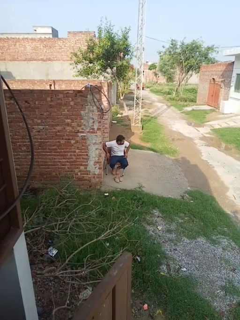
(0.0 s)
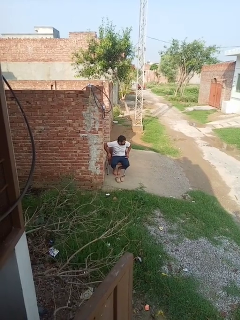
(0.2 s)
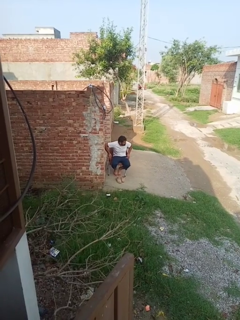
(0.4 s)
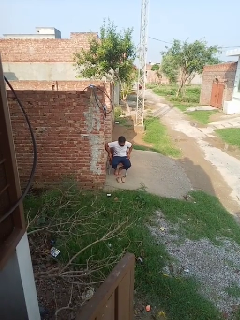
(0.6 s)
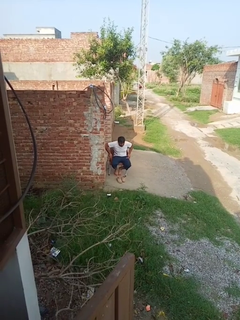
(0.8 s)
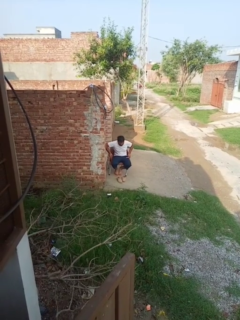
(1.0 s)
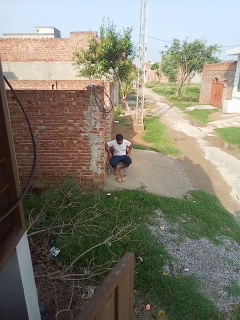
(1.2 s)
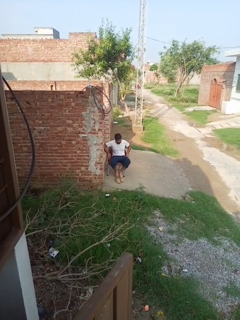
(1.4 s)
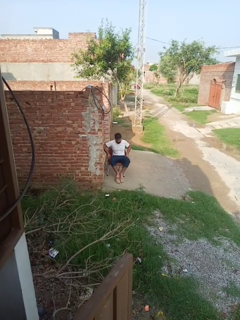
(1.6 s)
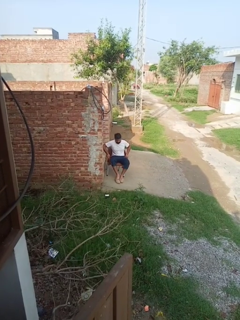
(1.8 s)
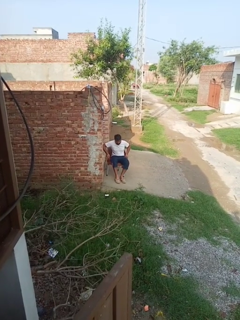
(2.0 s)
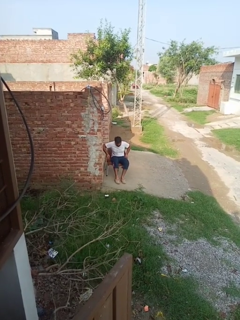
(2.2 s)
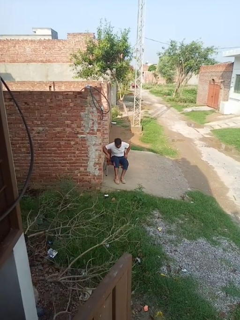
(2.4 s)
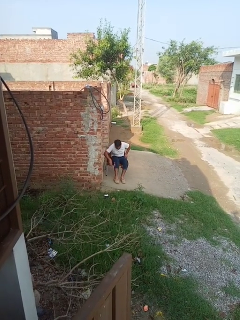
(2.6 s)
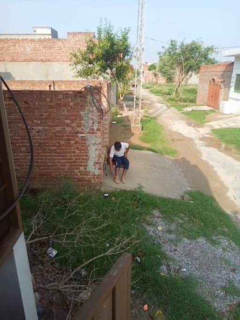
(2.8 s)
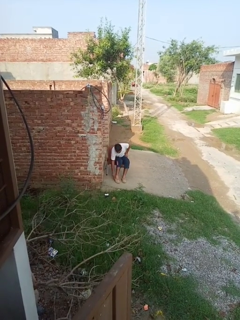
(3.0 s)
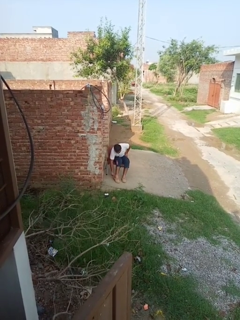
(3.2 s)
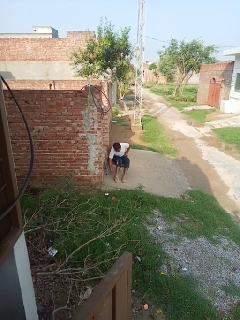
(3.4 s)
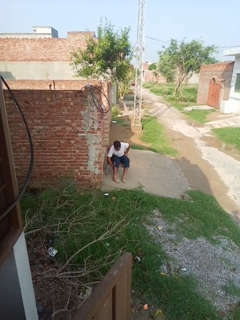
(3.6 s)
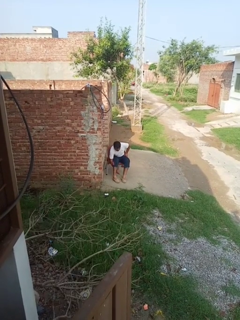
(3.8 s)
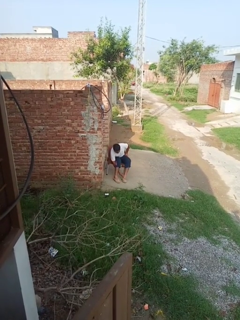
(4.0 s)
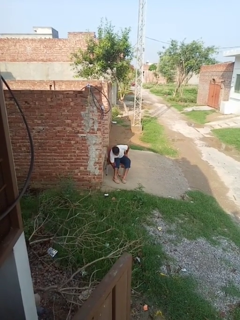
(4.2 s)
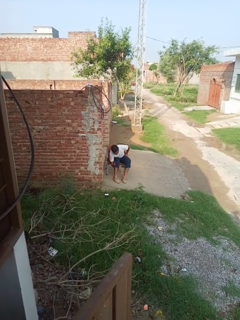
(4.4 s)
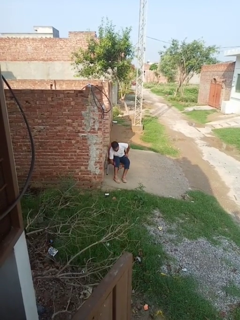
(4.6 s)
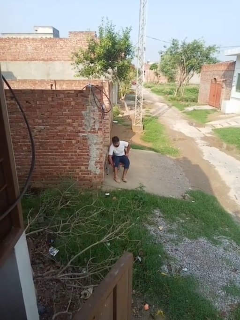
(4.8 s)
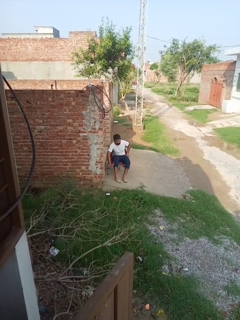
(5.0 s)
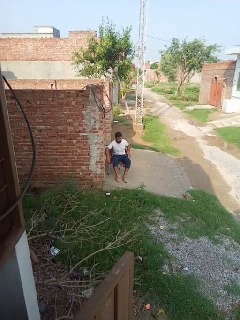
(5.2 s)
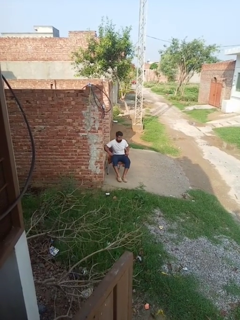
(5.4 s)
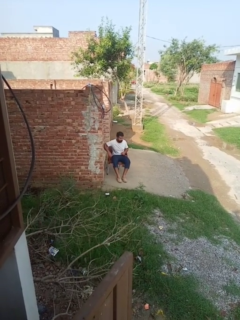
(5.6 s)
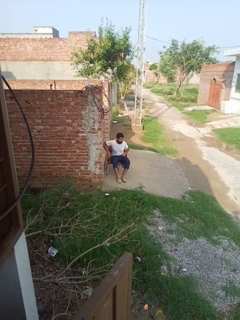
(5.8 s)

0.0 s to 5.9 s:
person puts on shoes

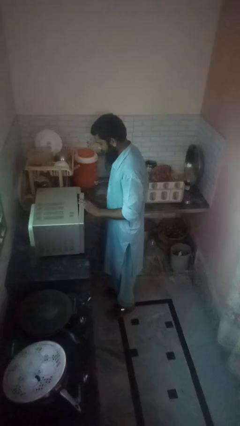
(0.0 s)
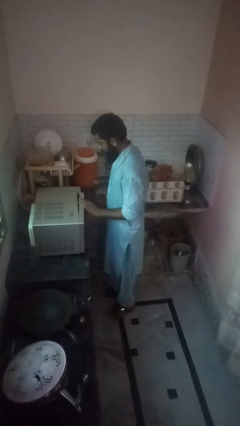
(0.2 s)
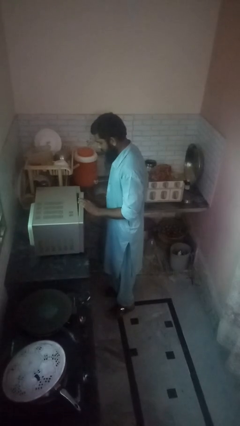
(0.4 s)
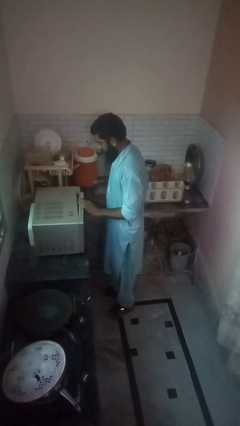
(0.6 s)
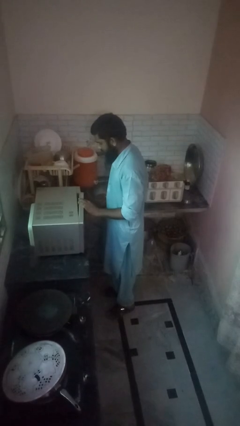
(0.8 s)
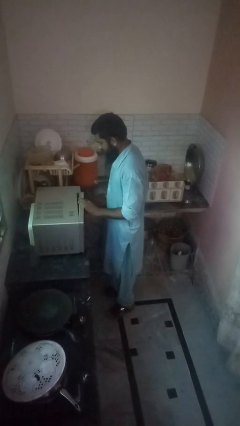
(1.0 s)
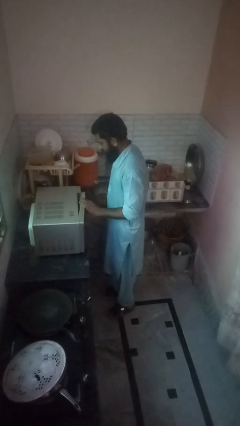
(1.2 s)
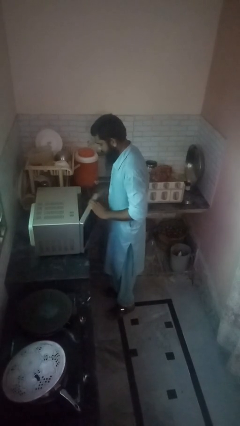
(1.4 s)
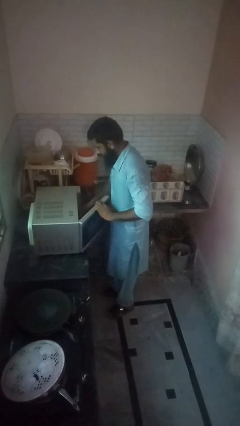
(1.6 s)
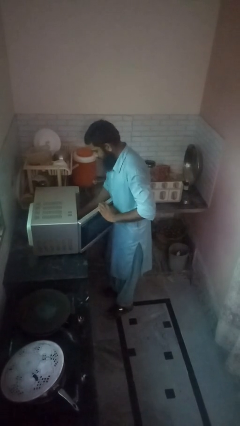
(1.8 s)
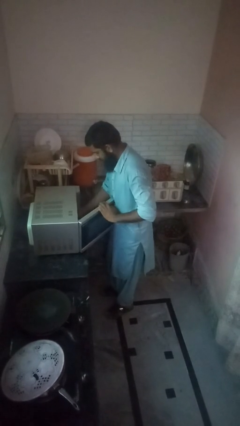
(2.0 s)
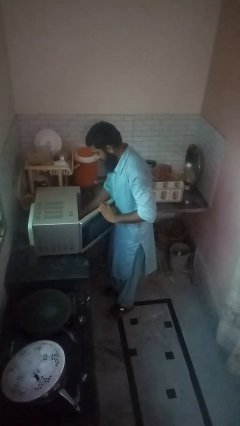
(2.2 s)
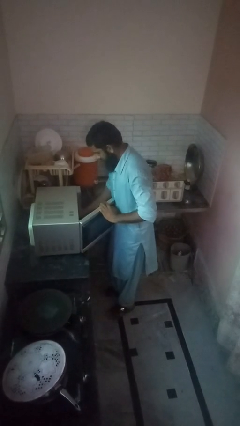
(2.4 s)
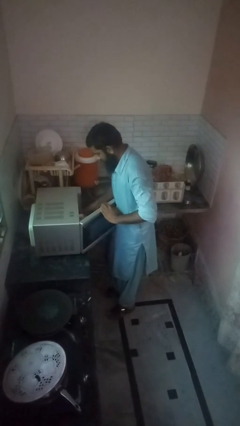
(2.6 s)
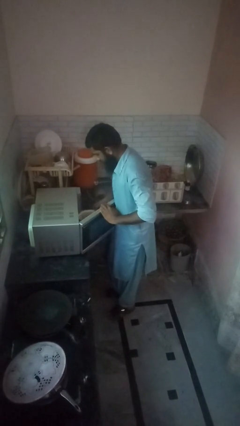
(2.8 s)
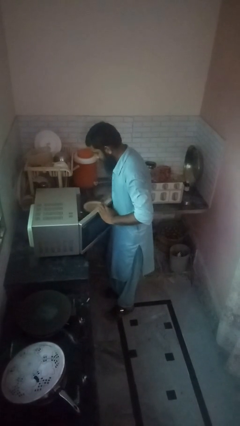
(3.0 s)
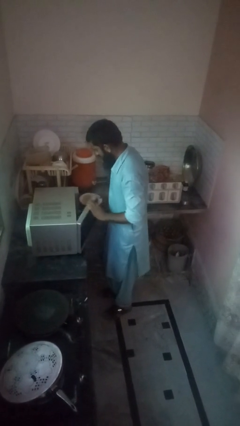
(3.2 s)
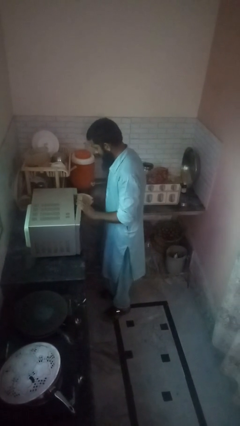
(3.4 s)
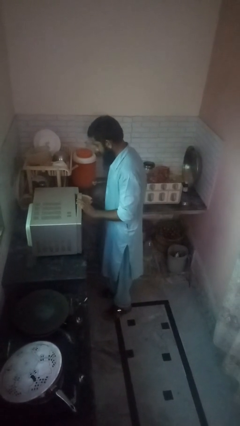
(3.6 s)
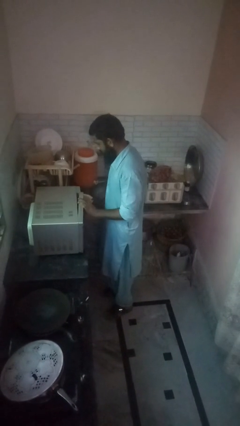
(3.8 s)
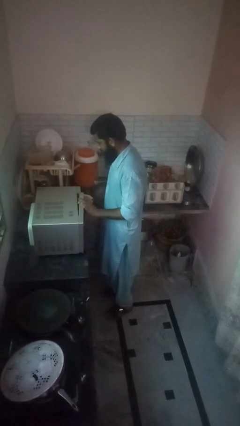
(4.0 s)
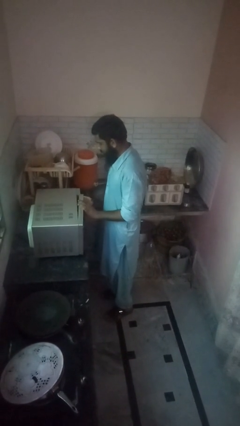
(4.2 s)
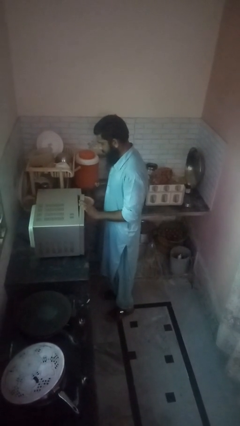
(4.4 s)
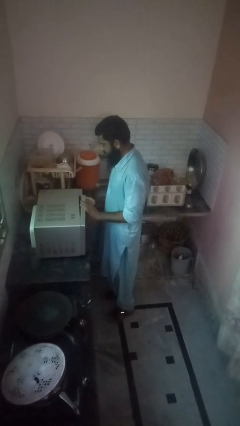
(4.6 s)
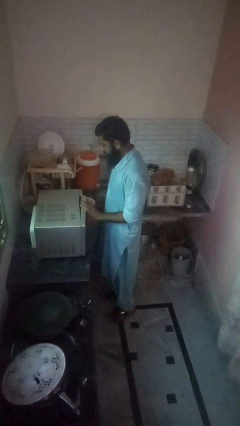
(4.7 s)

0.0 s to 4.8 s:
person takes object from oven

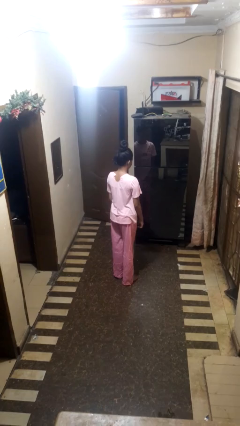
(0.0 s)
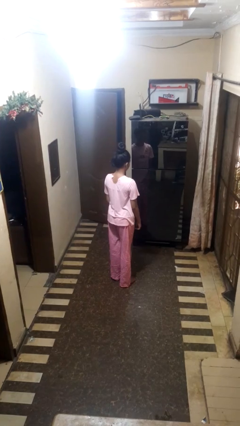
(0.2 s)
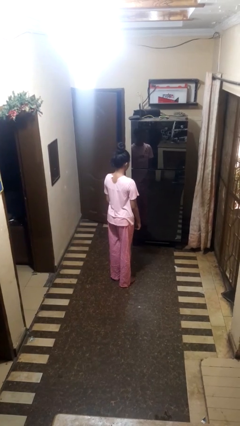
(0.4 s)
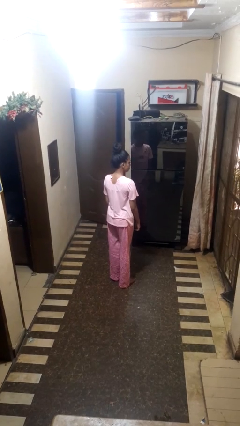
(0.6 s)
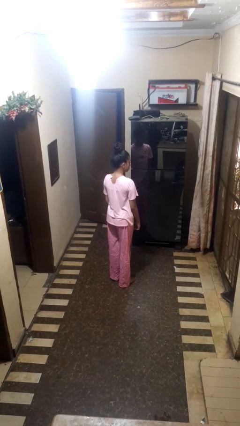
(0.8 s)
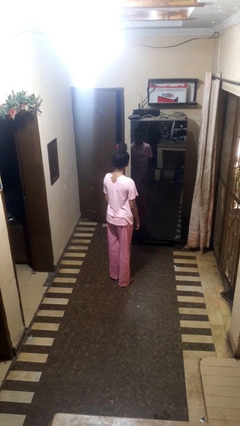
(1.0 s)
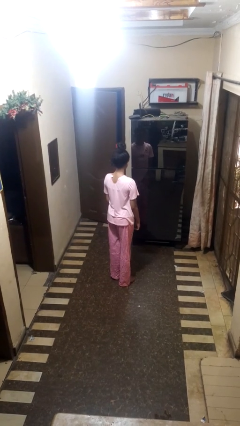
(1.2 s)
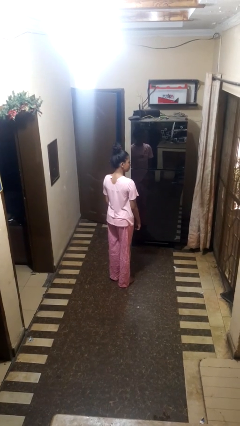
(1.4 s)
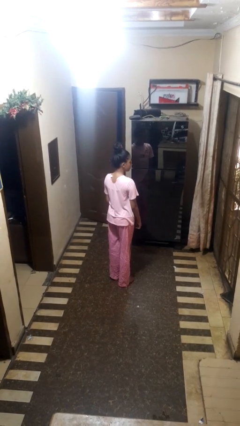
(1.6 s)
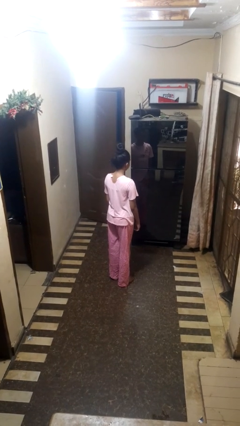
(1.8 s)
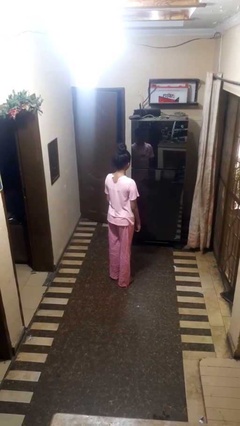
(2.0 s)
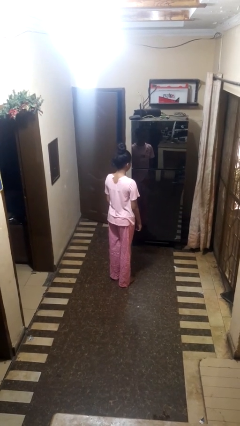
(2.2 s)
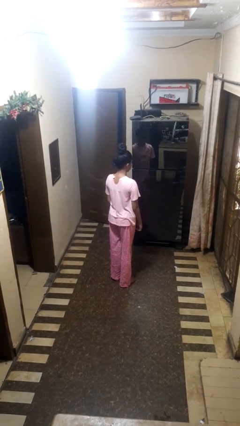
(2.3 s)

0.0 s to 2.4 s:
person nods head

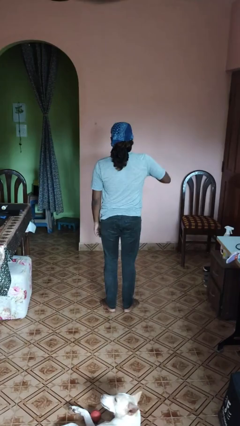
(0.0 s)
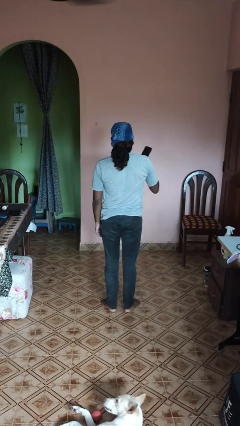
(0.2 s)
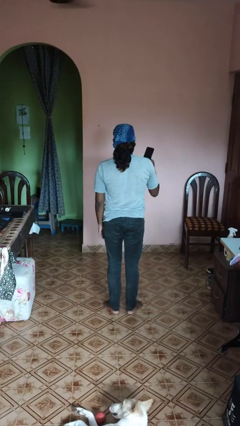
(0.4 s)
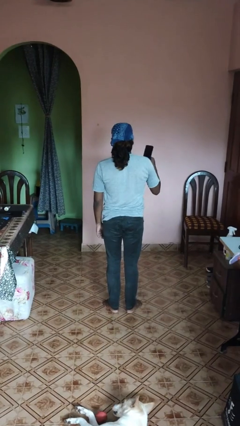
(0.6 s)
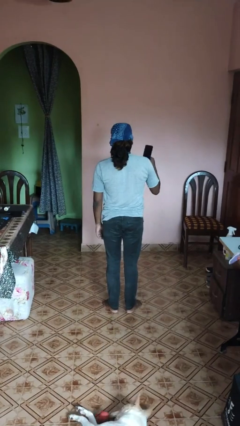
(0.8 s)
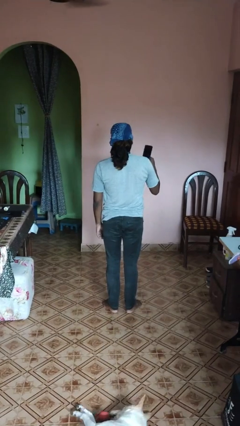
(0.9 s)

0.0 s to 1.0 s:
person takes phone from pocket

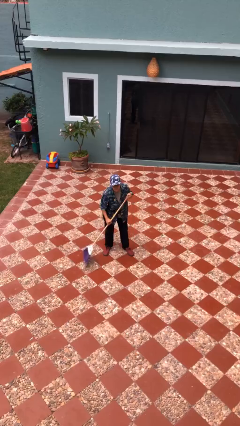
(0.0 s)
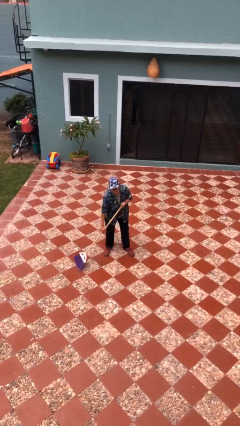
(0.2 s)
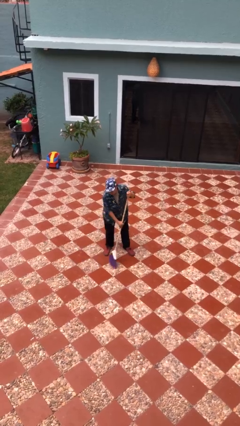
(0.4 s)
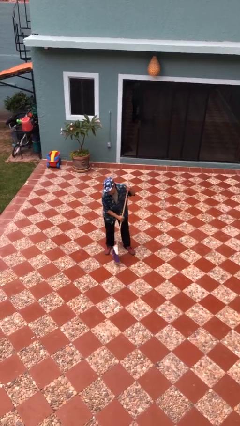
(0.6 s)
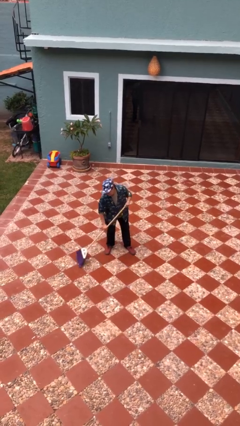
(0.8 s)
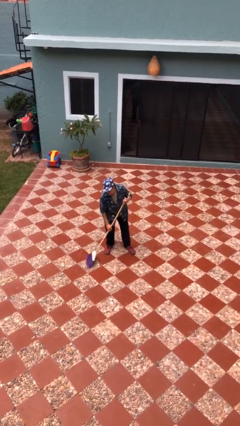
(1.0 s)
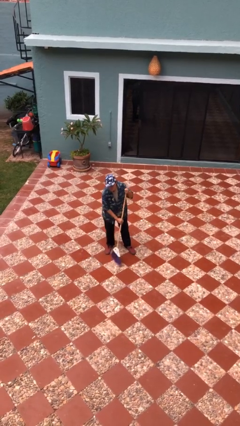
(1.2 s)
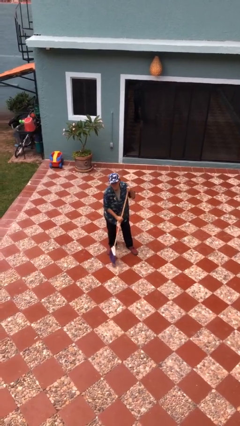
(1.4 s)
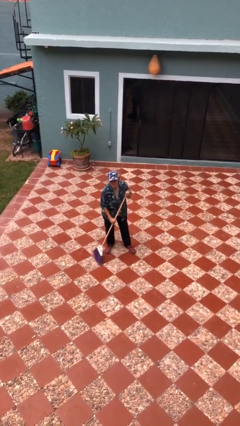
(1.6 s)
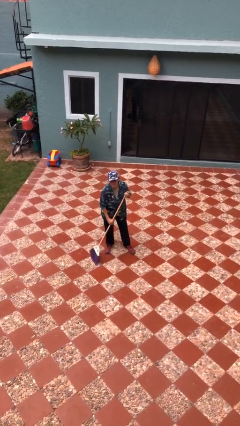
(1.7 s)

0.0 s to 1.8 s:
person sweeps floor

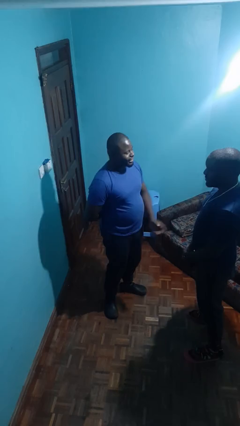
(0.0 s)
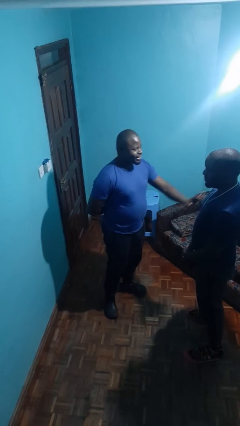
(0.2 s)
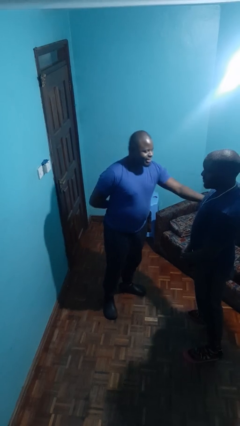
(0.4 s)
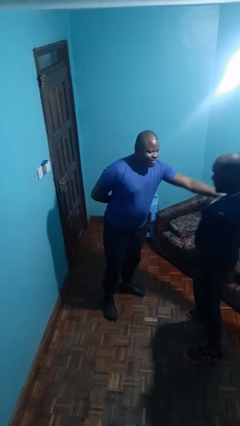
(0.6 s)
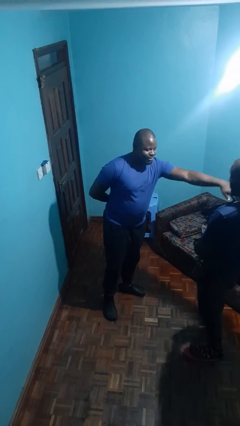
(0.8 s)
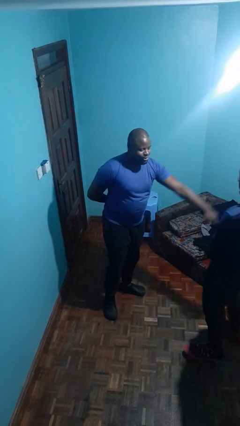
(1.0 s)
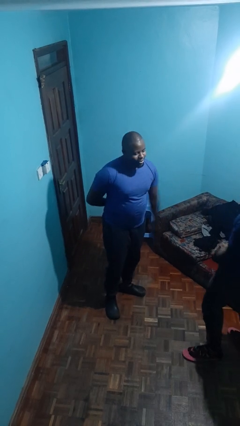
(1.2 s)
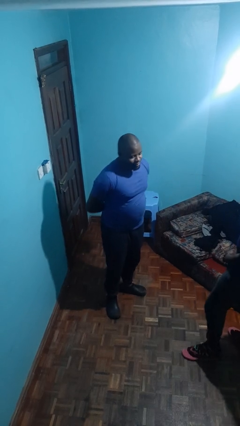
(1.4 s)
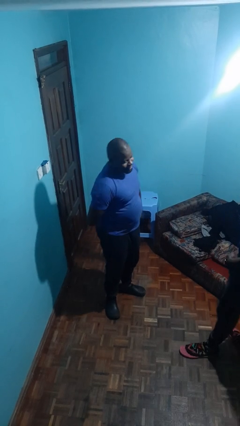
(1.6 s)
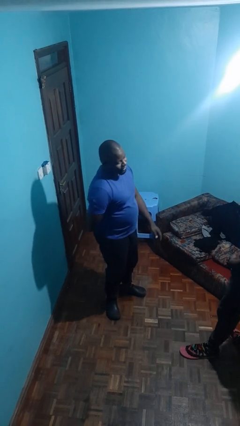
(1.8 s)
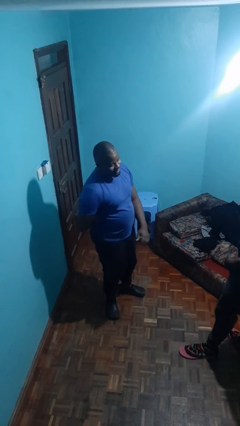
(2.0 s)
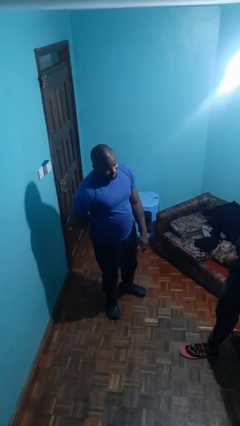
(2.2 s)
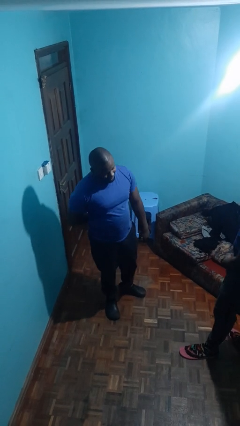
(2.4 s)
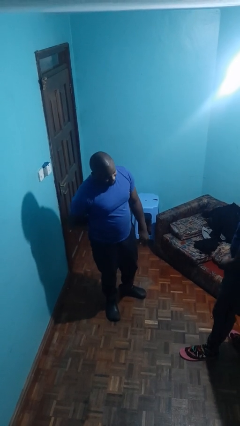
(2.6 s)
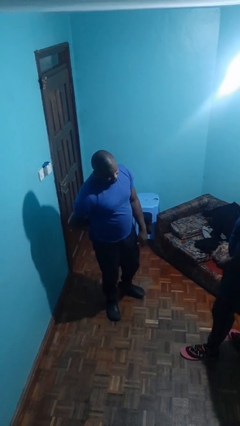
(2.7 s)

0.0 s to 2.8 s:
person shoves person

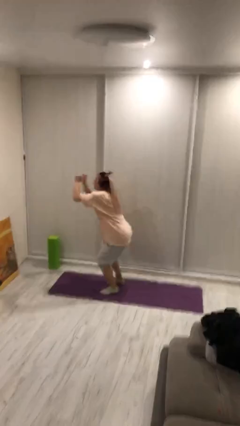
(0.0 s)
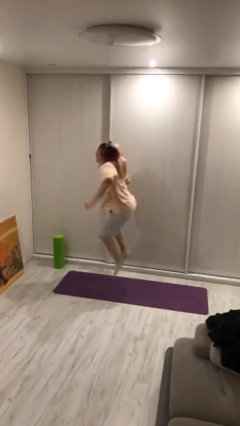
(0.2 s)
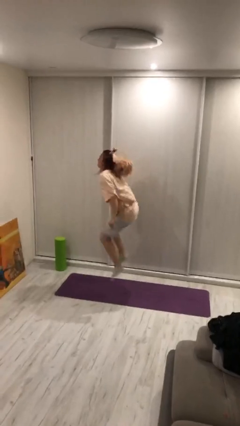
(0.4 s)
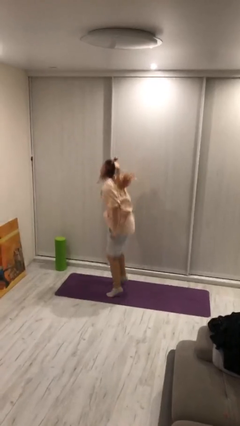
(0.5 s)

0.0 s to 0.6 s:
person jumps
